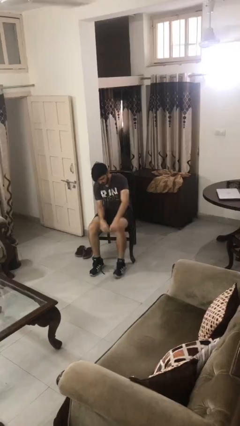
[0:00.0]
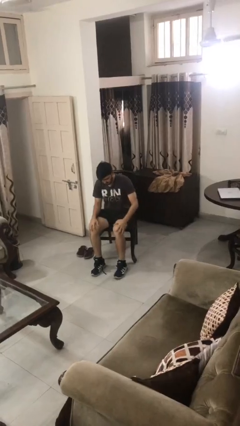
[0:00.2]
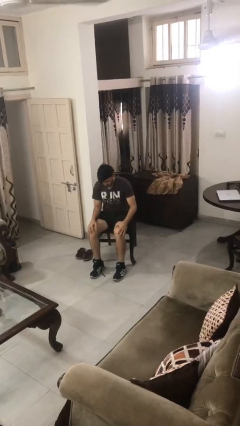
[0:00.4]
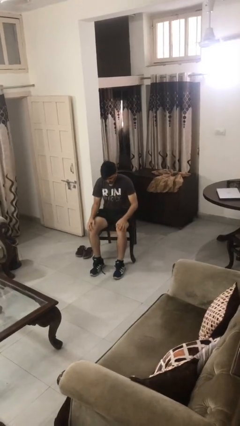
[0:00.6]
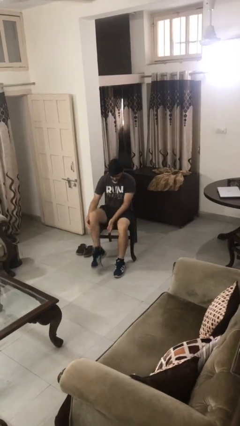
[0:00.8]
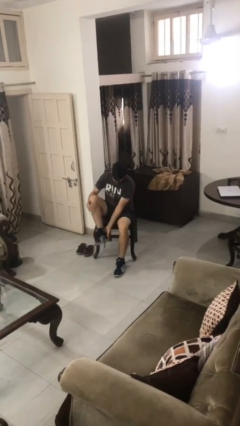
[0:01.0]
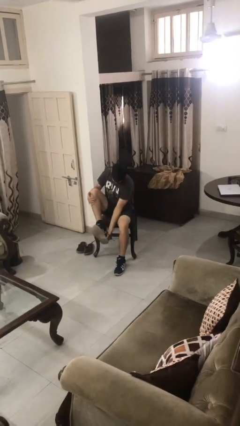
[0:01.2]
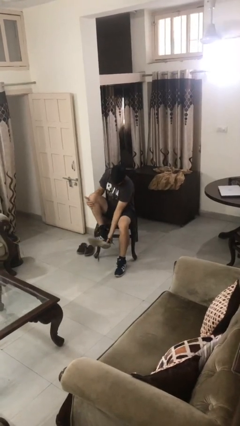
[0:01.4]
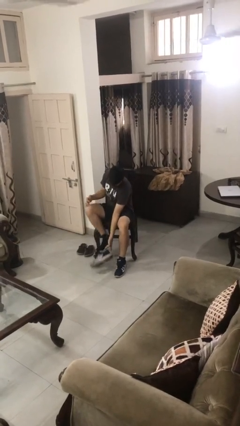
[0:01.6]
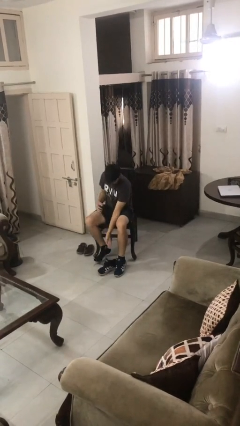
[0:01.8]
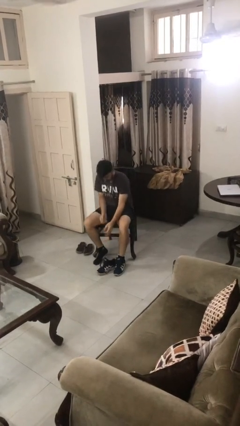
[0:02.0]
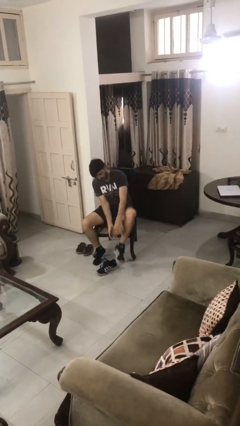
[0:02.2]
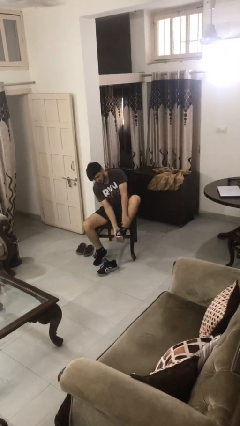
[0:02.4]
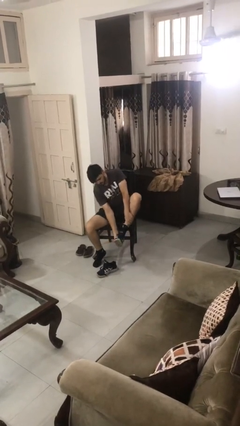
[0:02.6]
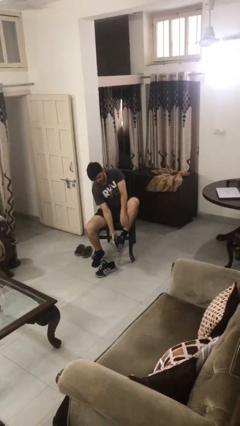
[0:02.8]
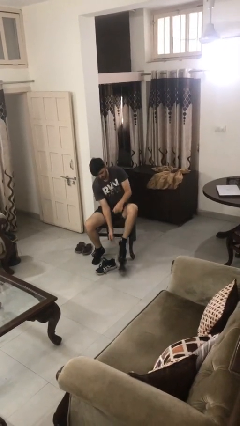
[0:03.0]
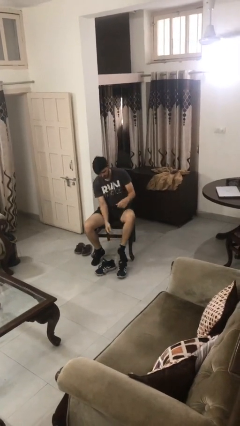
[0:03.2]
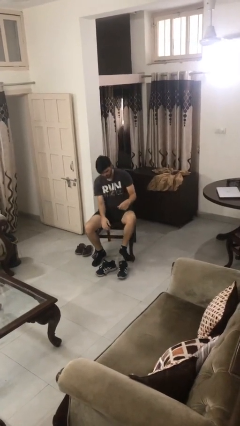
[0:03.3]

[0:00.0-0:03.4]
person takes off shoes

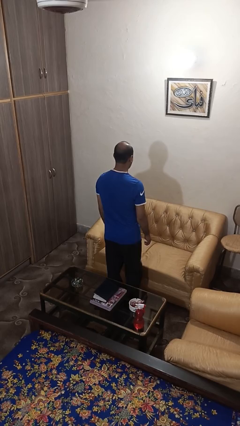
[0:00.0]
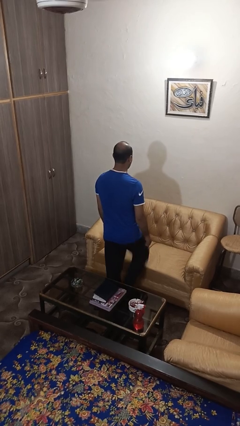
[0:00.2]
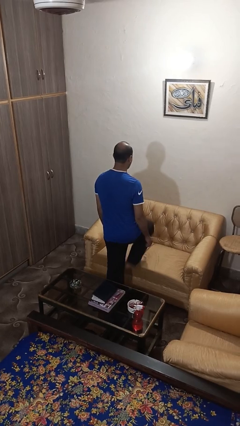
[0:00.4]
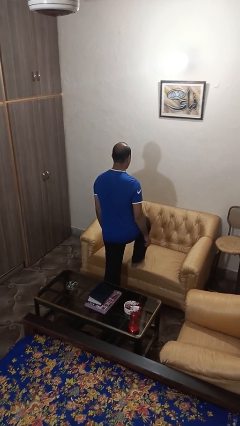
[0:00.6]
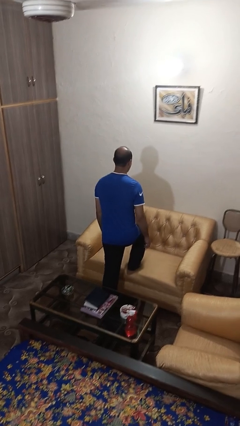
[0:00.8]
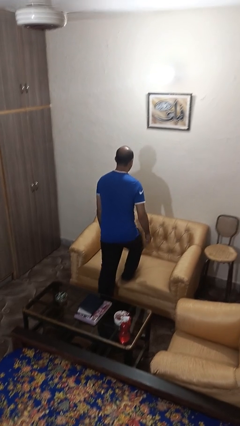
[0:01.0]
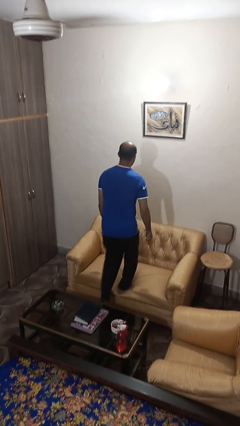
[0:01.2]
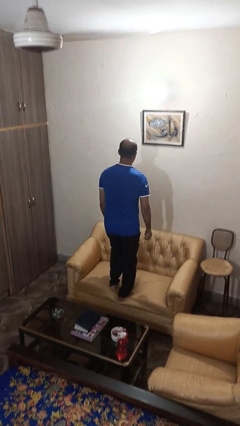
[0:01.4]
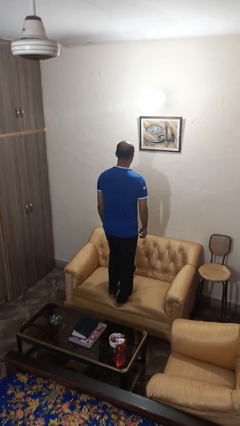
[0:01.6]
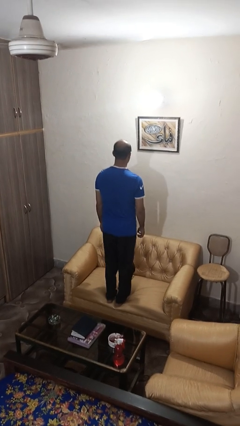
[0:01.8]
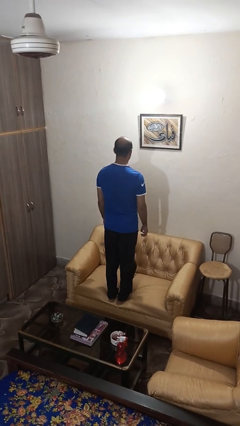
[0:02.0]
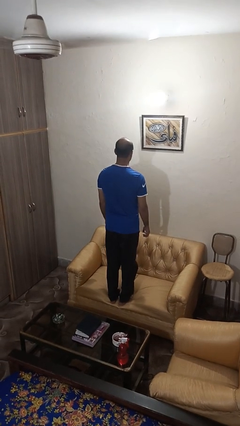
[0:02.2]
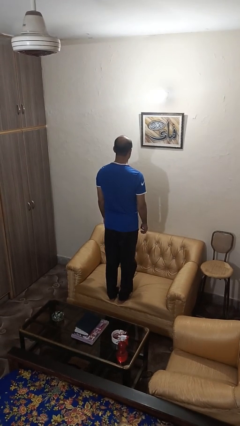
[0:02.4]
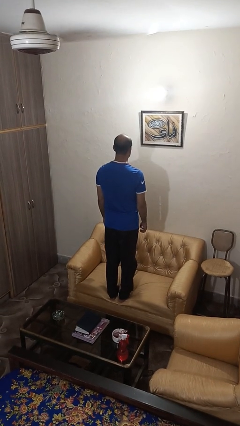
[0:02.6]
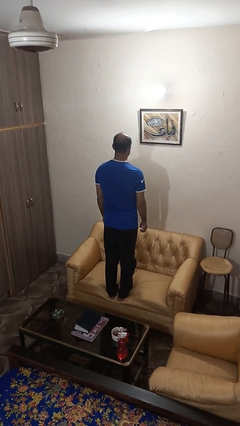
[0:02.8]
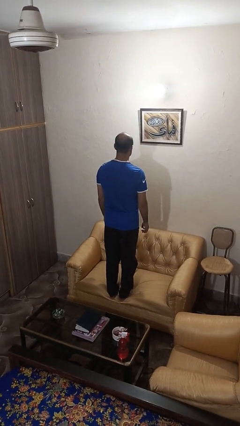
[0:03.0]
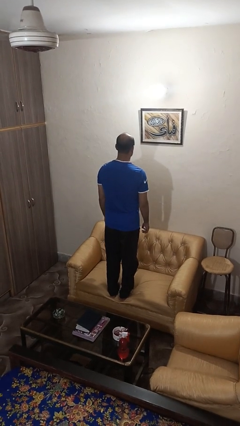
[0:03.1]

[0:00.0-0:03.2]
person climbs on couch

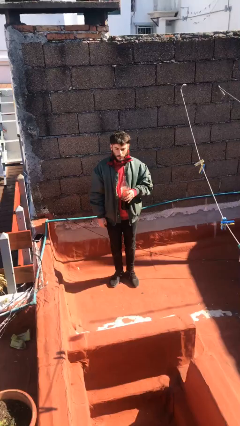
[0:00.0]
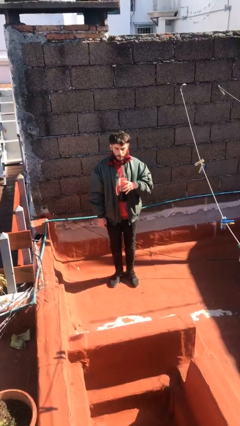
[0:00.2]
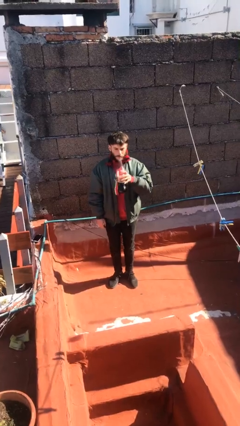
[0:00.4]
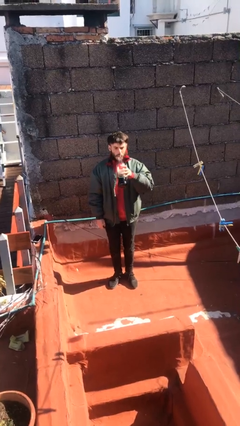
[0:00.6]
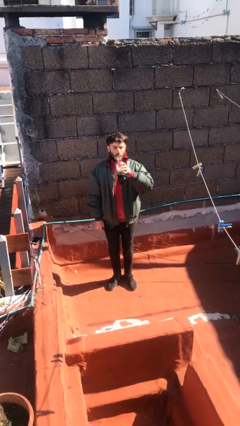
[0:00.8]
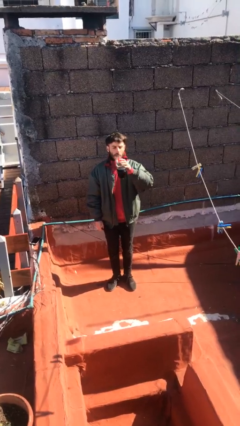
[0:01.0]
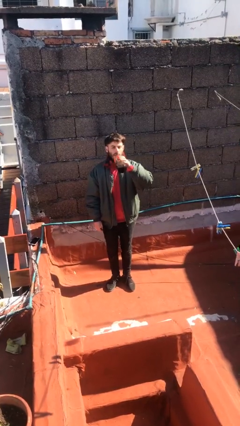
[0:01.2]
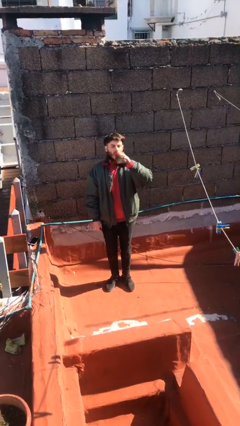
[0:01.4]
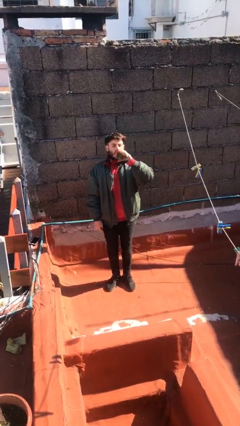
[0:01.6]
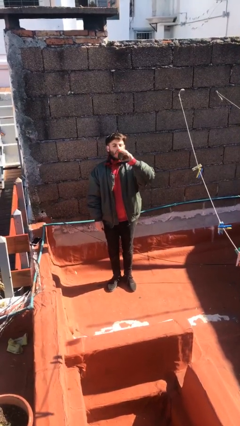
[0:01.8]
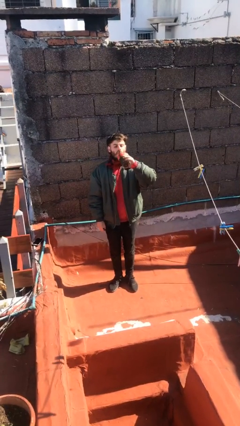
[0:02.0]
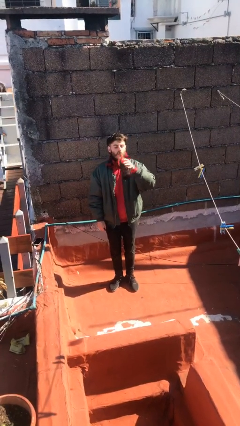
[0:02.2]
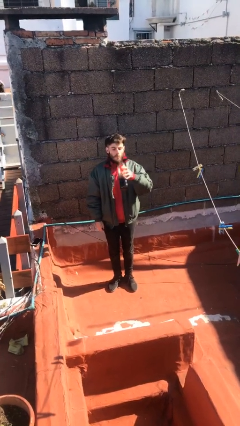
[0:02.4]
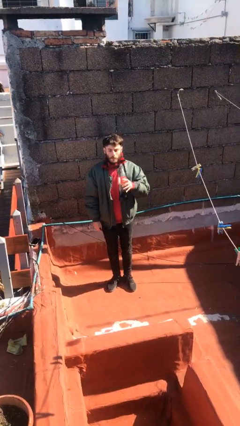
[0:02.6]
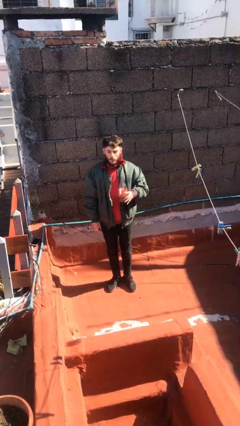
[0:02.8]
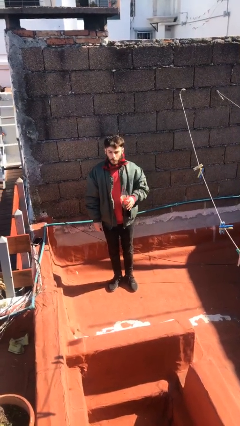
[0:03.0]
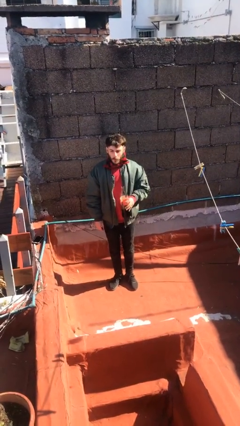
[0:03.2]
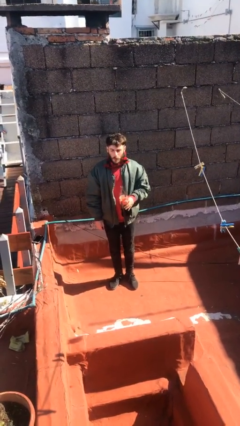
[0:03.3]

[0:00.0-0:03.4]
person drinks from bottle

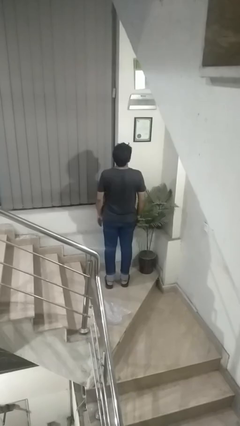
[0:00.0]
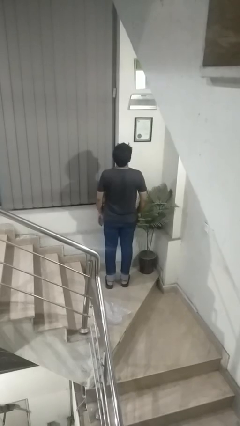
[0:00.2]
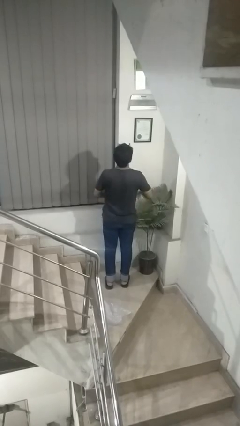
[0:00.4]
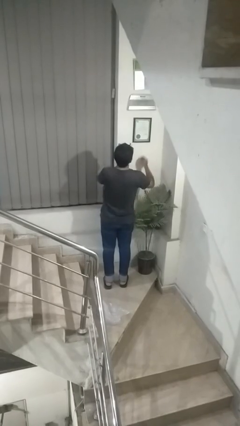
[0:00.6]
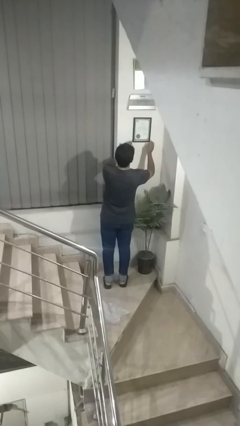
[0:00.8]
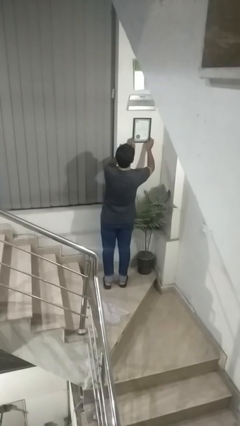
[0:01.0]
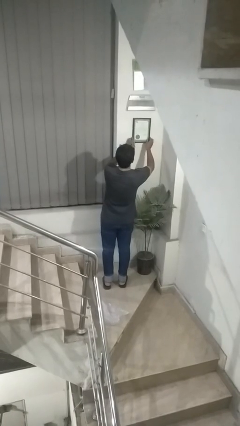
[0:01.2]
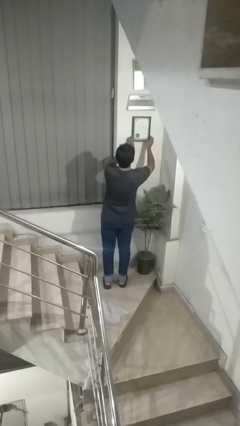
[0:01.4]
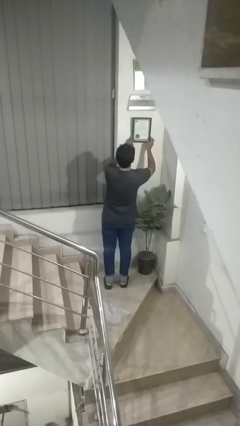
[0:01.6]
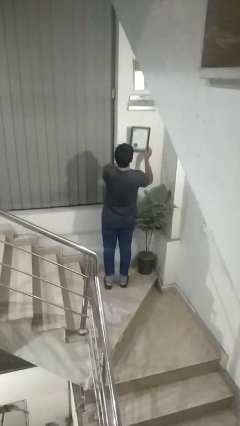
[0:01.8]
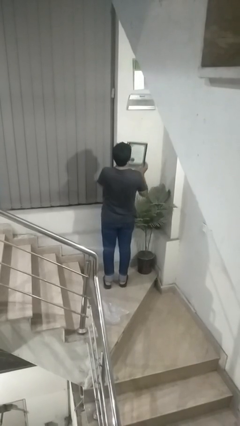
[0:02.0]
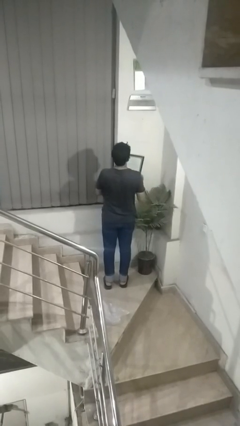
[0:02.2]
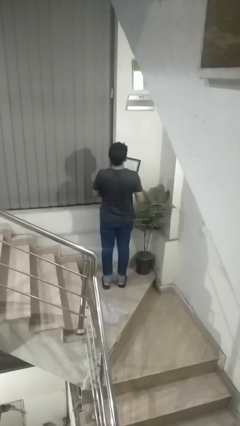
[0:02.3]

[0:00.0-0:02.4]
person takes down picture frame

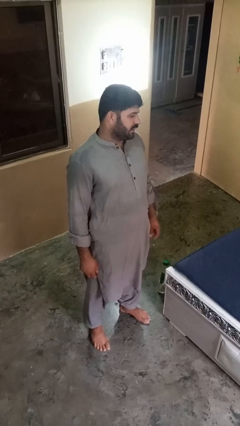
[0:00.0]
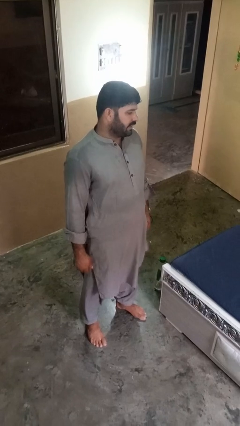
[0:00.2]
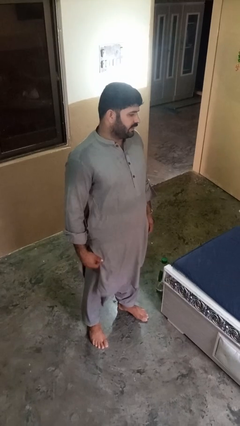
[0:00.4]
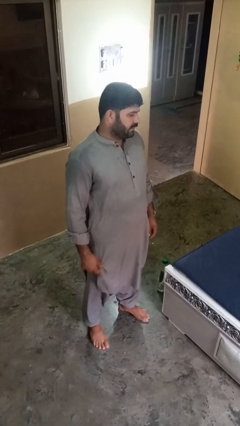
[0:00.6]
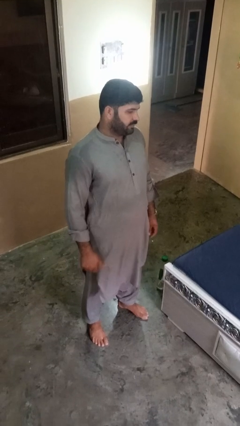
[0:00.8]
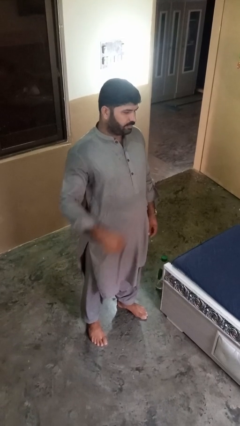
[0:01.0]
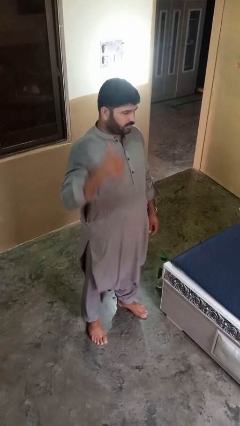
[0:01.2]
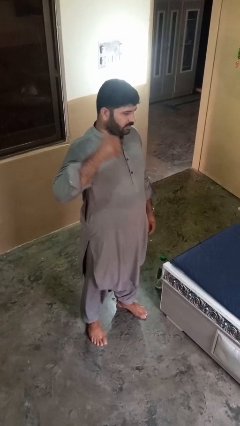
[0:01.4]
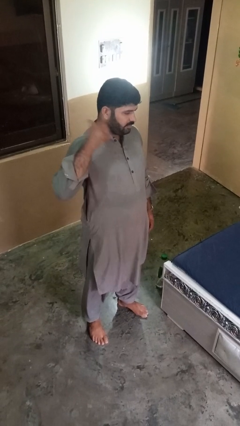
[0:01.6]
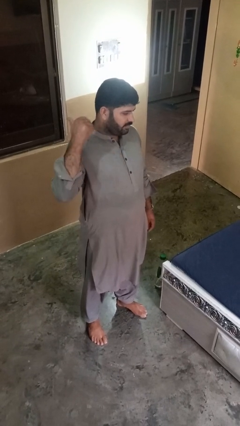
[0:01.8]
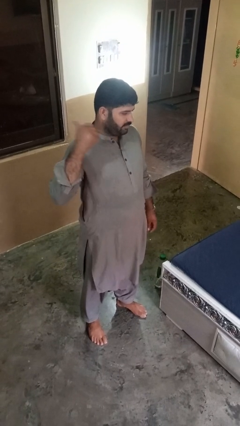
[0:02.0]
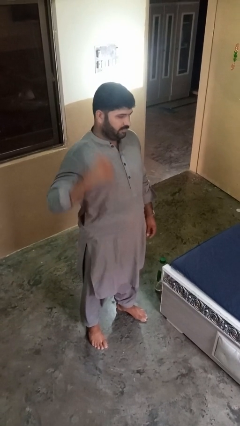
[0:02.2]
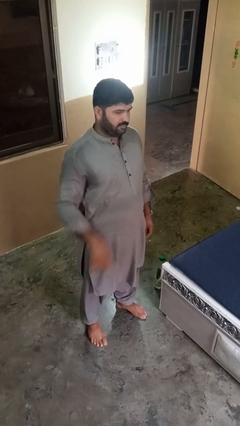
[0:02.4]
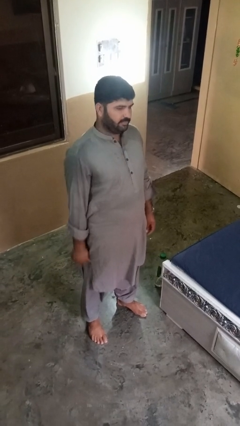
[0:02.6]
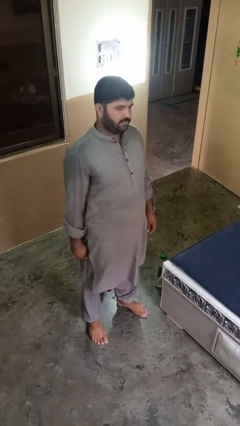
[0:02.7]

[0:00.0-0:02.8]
person gestures behind me

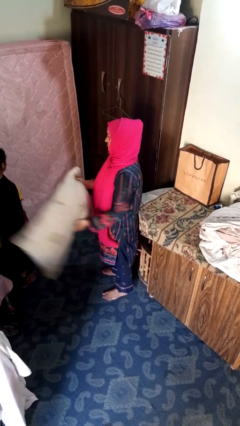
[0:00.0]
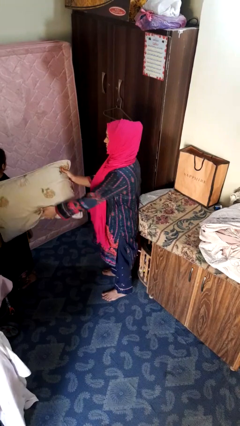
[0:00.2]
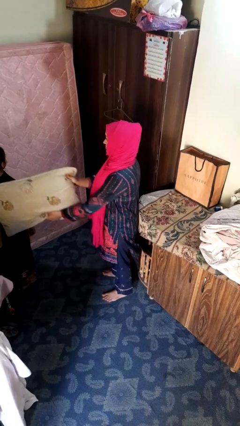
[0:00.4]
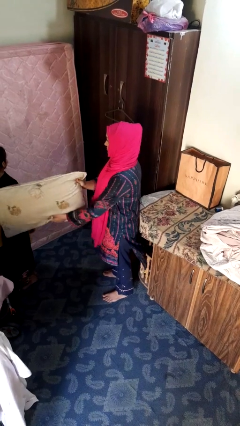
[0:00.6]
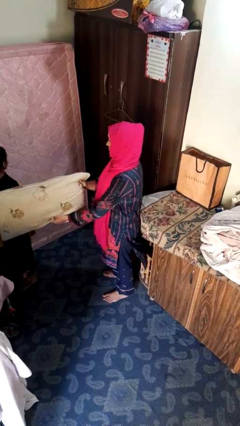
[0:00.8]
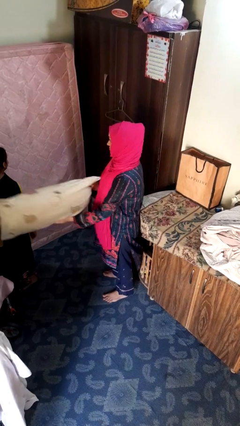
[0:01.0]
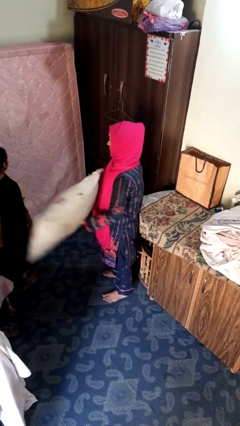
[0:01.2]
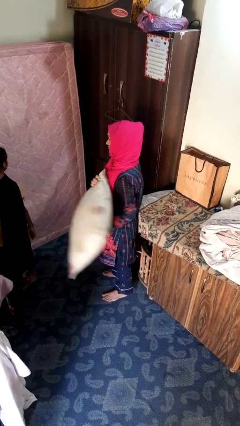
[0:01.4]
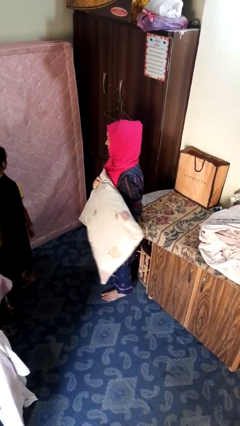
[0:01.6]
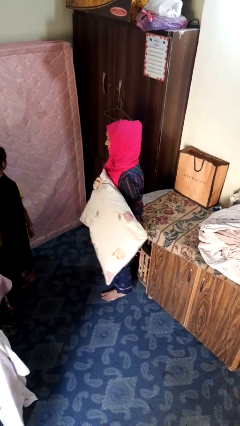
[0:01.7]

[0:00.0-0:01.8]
person hits person with pillow

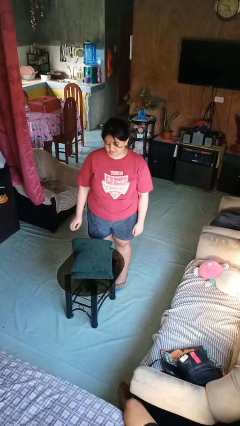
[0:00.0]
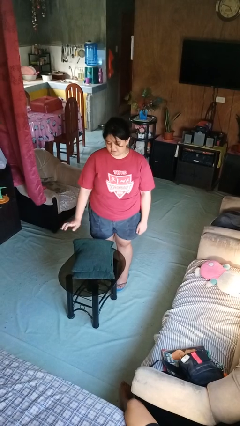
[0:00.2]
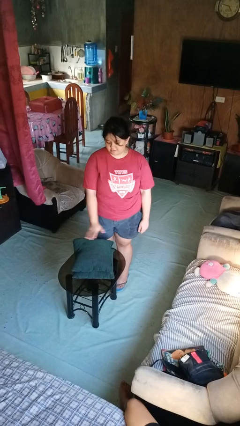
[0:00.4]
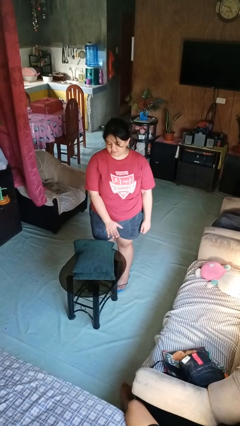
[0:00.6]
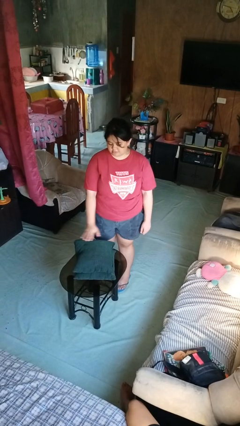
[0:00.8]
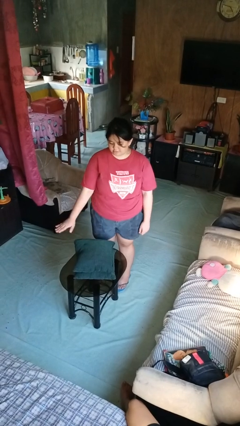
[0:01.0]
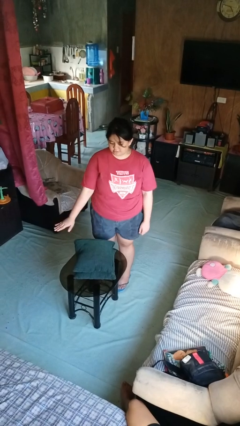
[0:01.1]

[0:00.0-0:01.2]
person waves hand over object
